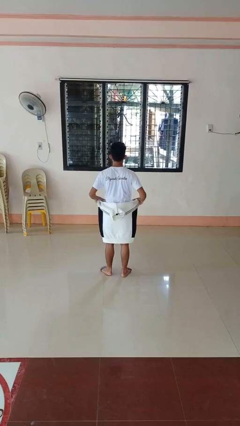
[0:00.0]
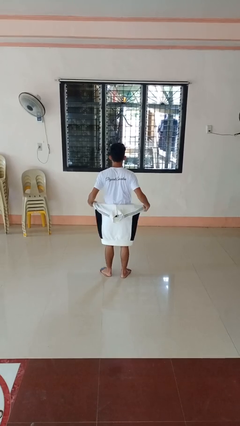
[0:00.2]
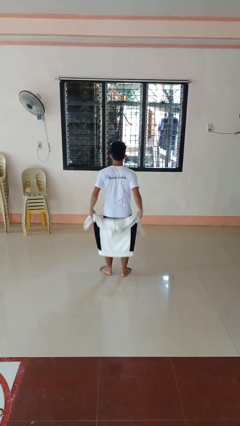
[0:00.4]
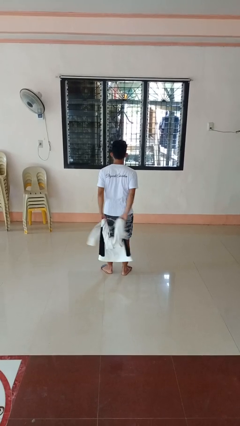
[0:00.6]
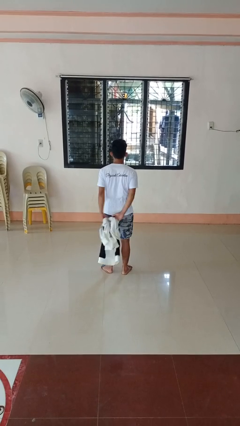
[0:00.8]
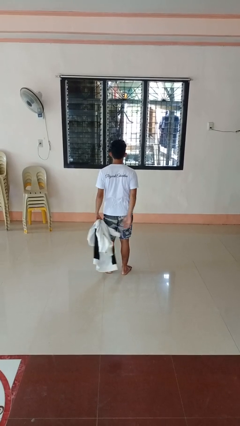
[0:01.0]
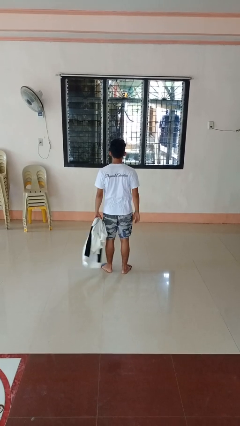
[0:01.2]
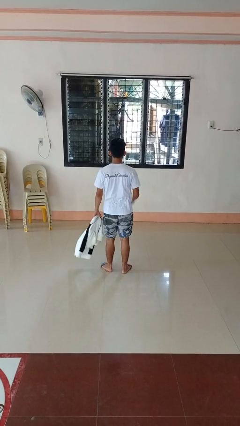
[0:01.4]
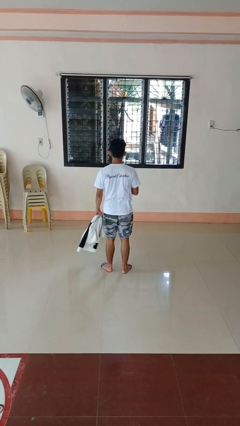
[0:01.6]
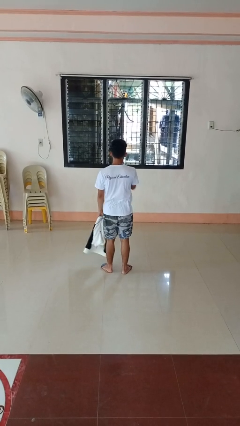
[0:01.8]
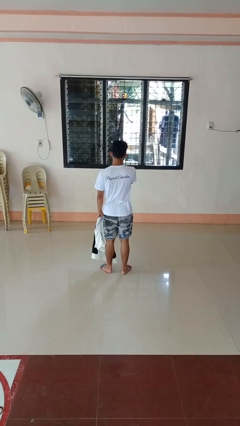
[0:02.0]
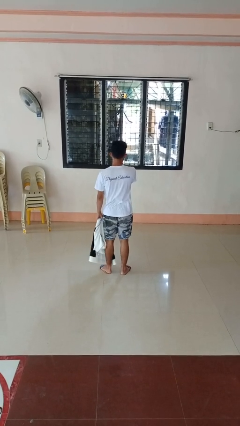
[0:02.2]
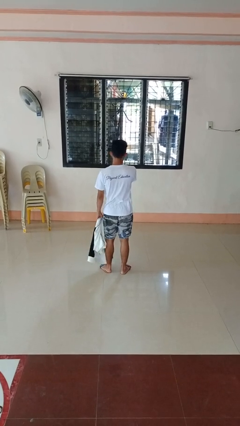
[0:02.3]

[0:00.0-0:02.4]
person unties jacket around waist

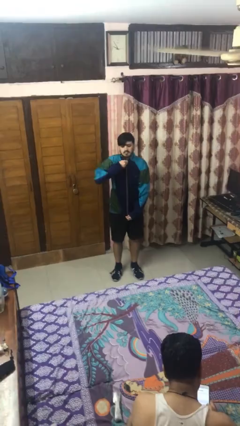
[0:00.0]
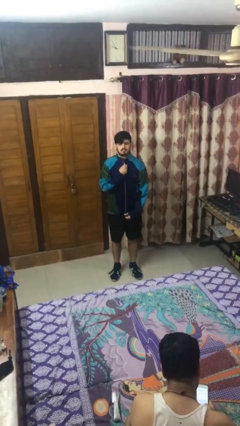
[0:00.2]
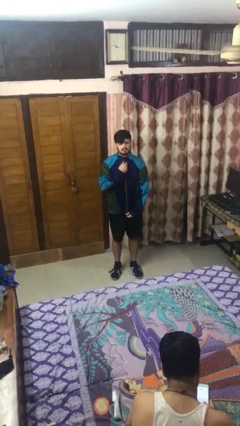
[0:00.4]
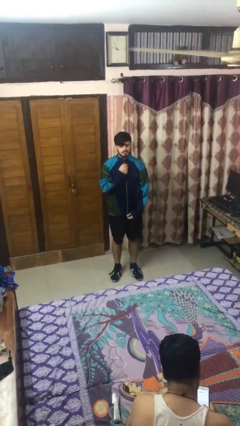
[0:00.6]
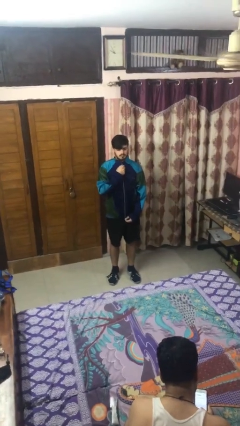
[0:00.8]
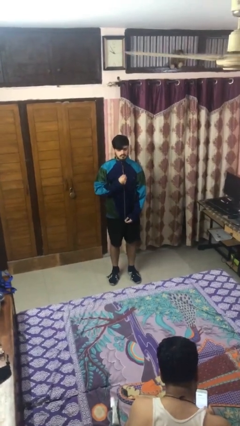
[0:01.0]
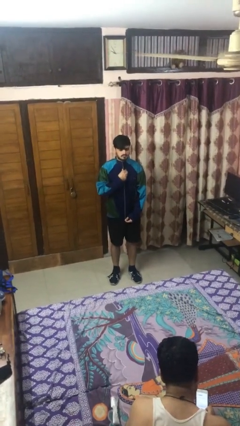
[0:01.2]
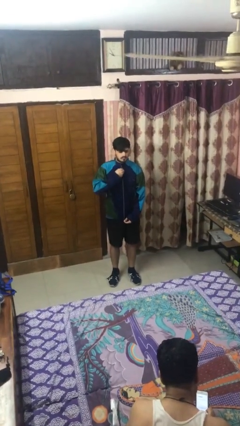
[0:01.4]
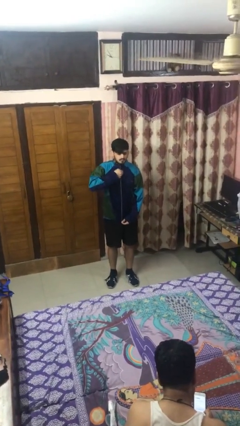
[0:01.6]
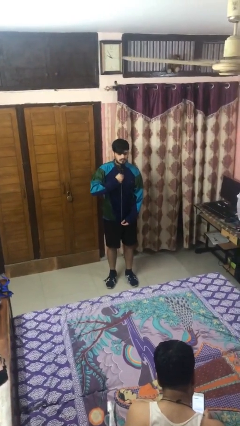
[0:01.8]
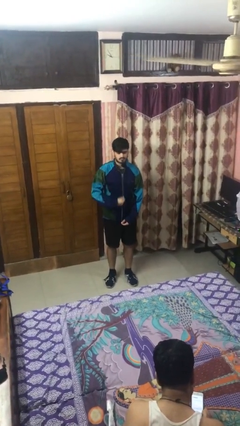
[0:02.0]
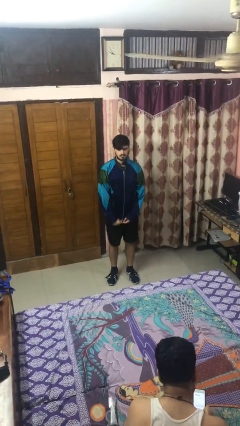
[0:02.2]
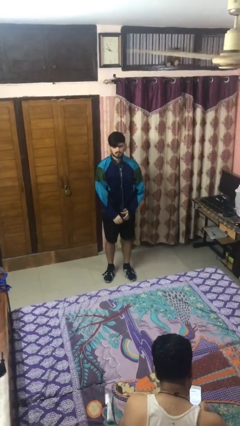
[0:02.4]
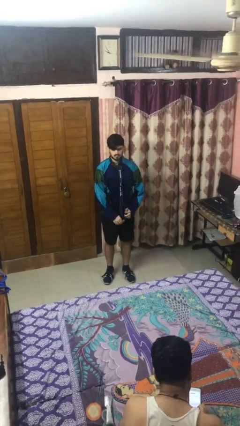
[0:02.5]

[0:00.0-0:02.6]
person unzips jacket

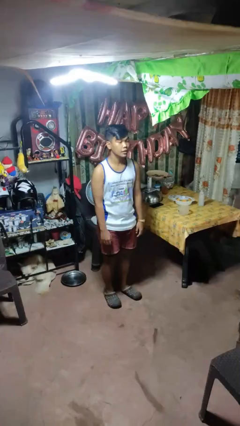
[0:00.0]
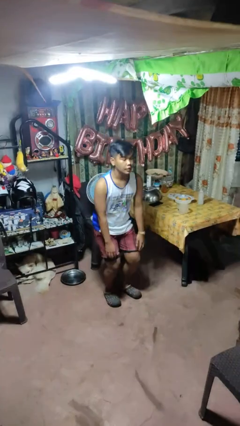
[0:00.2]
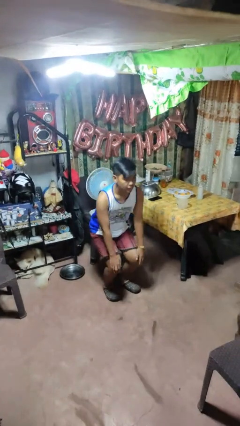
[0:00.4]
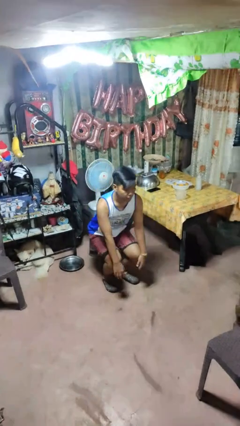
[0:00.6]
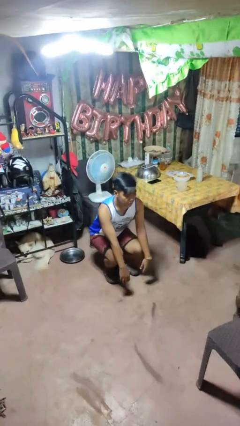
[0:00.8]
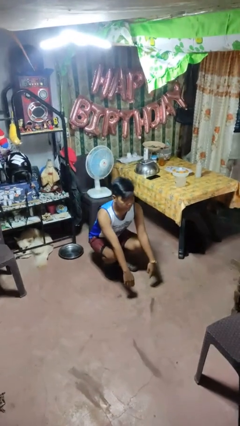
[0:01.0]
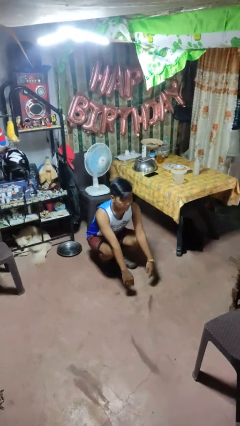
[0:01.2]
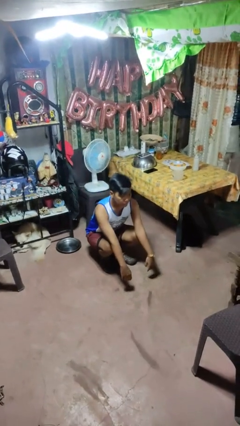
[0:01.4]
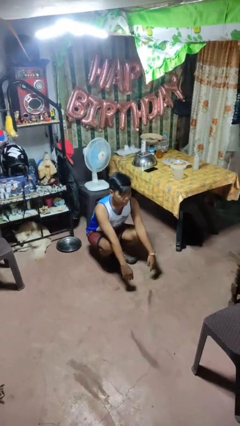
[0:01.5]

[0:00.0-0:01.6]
person squats

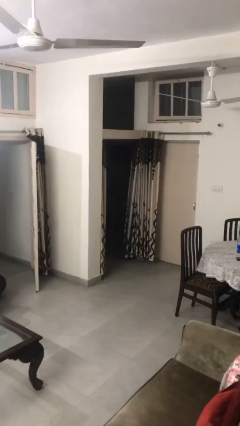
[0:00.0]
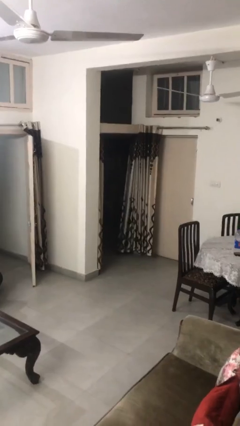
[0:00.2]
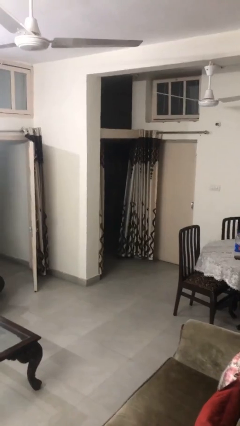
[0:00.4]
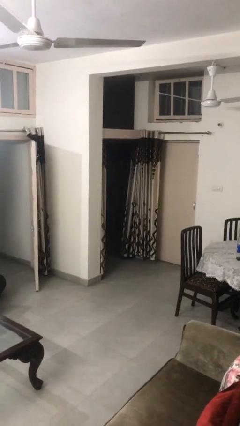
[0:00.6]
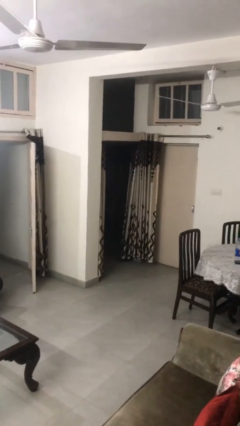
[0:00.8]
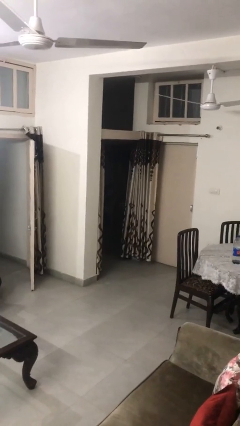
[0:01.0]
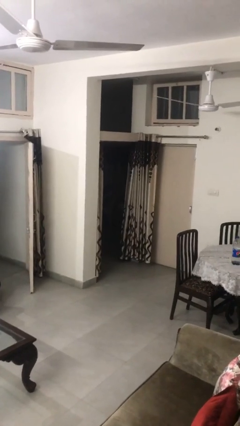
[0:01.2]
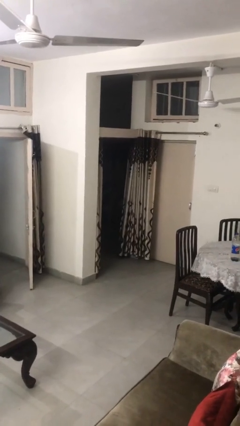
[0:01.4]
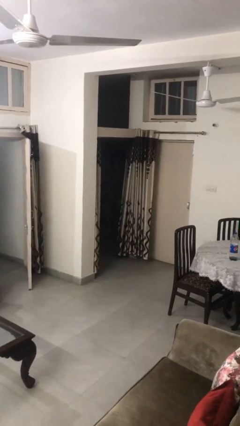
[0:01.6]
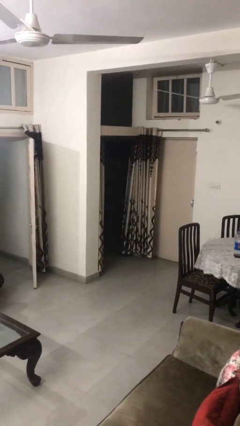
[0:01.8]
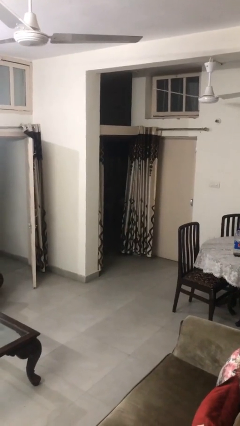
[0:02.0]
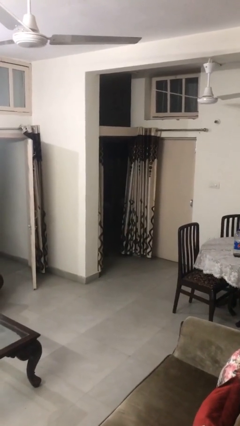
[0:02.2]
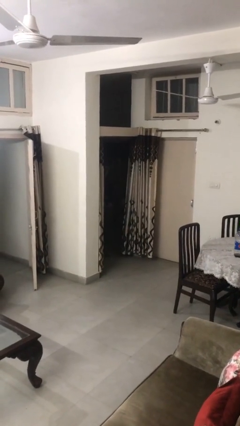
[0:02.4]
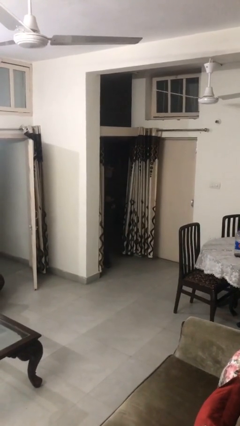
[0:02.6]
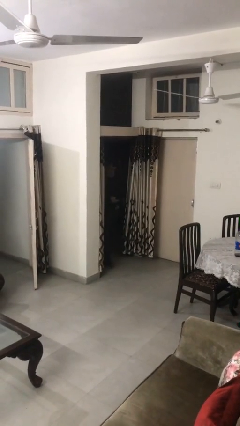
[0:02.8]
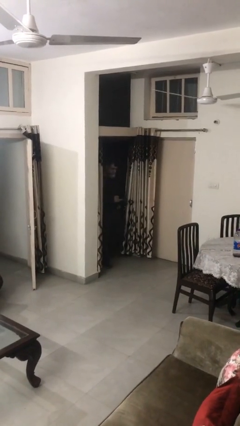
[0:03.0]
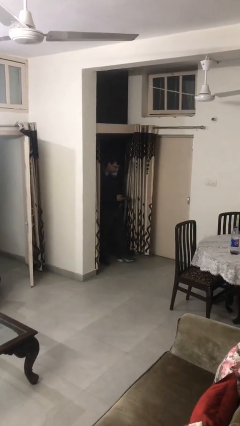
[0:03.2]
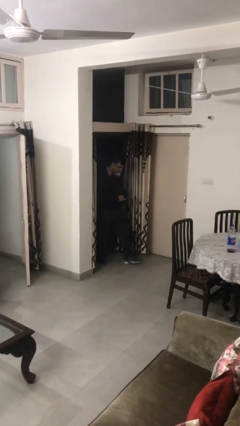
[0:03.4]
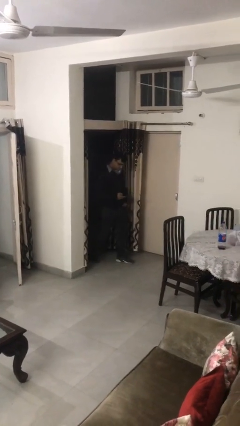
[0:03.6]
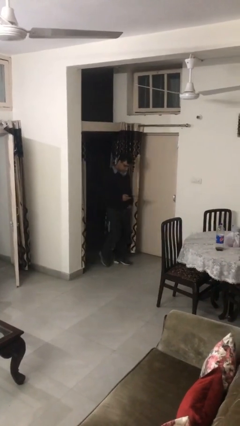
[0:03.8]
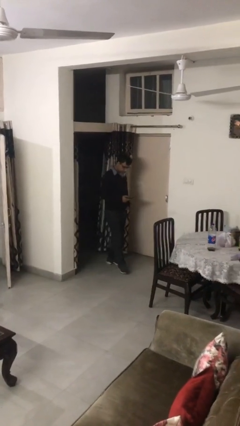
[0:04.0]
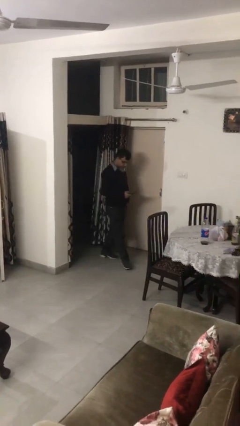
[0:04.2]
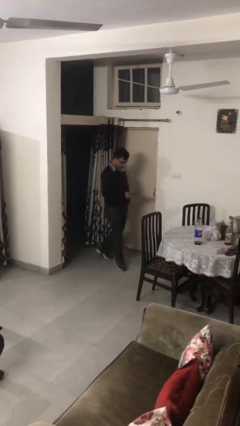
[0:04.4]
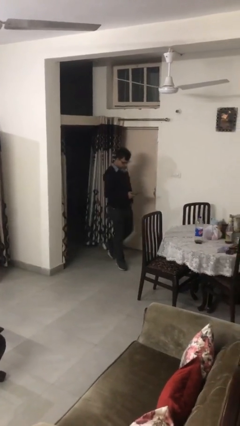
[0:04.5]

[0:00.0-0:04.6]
person enters scene through structure

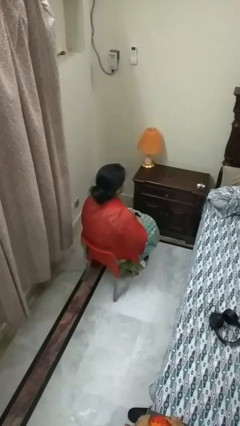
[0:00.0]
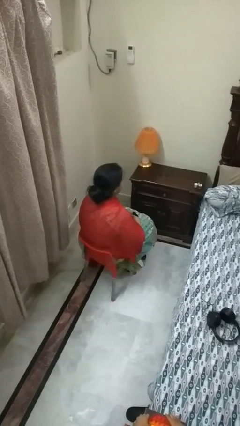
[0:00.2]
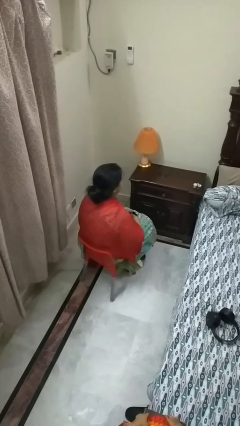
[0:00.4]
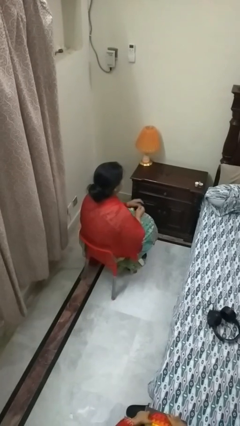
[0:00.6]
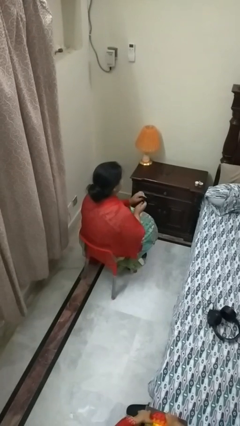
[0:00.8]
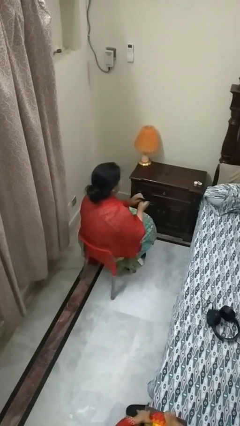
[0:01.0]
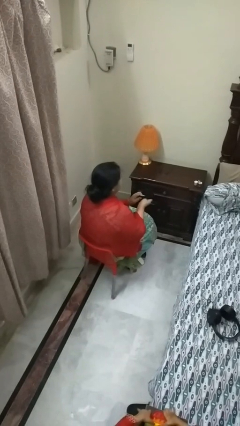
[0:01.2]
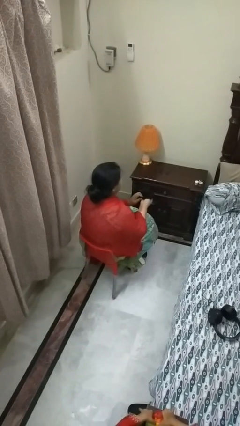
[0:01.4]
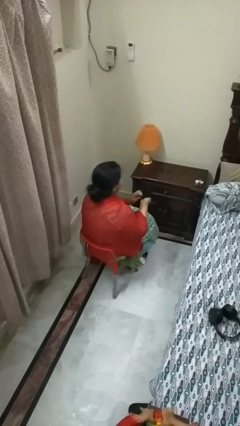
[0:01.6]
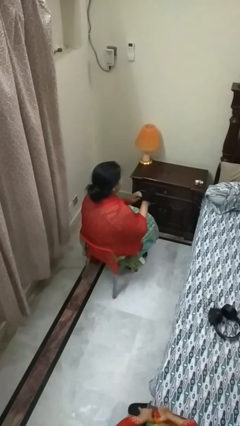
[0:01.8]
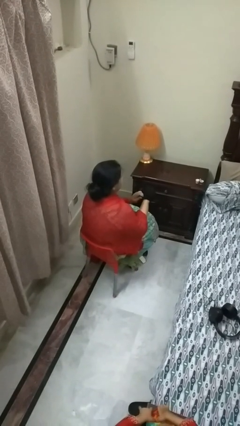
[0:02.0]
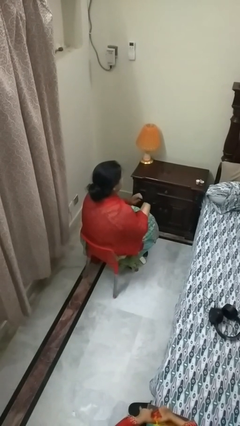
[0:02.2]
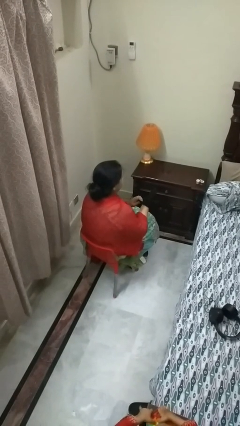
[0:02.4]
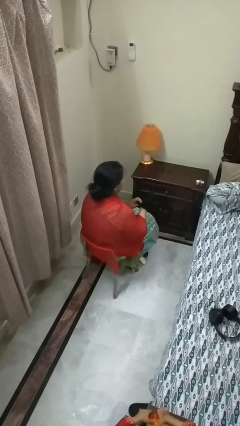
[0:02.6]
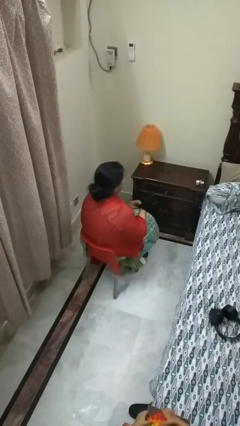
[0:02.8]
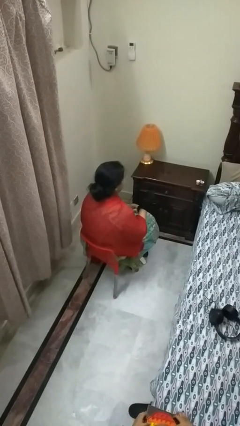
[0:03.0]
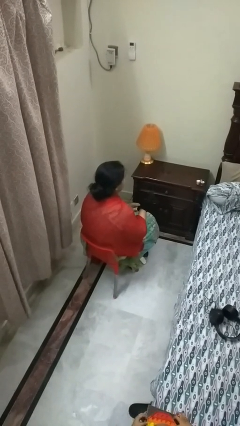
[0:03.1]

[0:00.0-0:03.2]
person puts on gloves

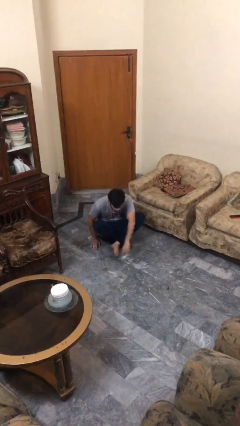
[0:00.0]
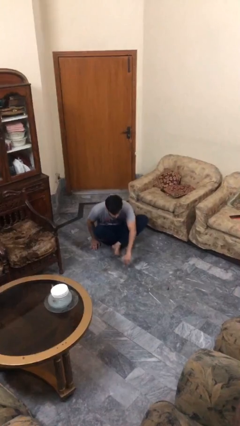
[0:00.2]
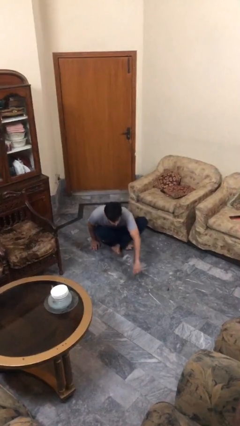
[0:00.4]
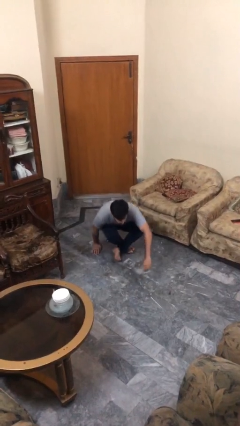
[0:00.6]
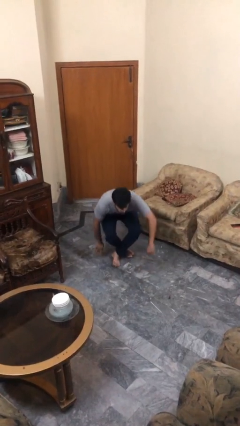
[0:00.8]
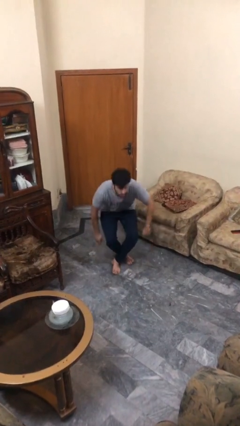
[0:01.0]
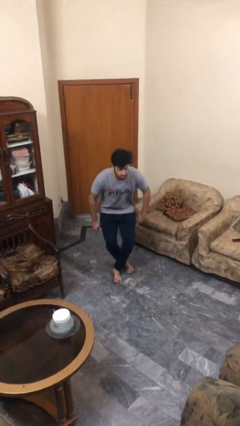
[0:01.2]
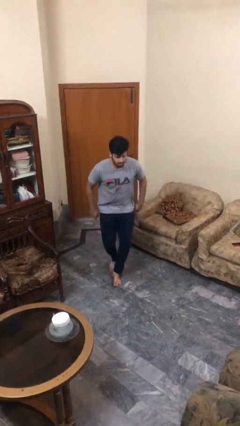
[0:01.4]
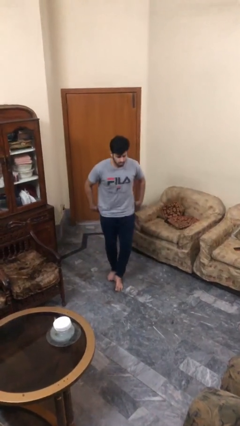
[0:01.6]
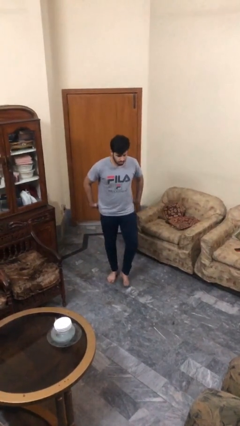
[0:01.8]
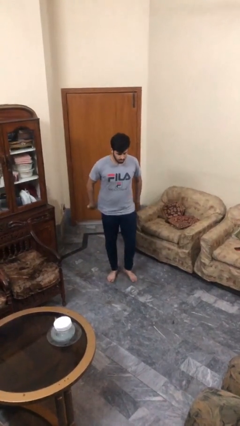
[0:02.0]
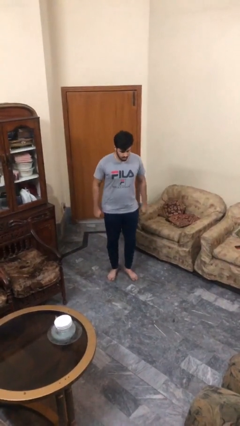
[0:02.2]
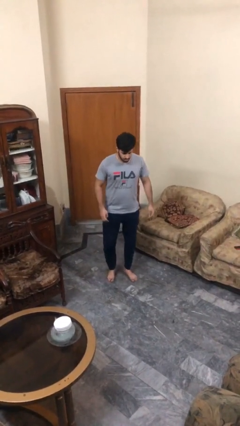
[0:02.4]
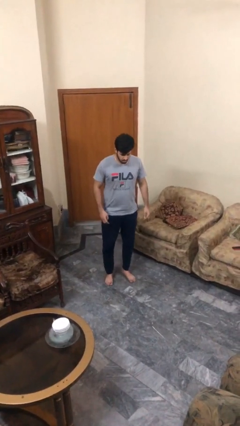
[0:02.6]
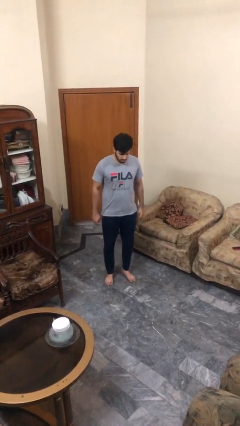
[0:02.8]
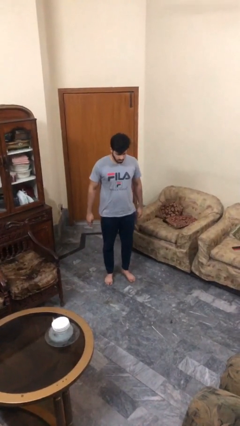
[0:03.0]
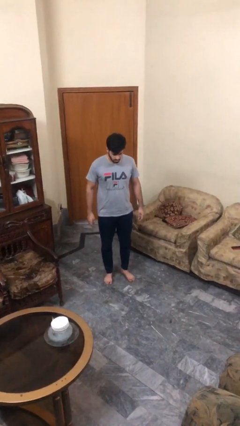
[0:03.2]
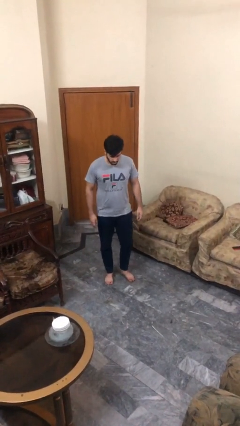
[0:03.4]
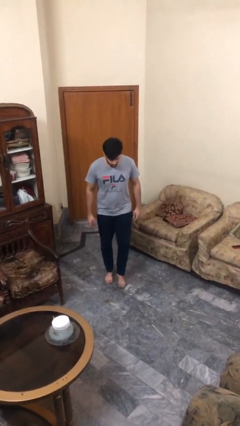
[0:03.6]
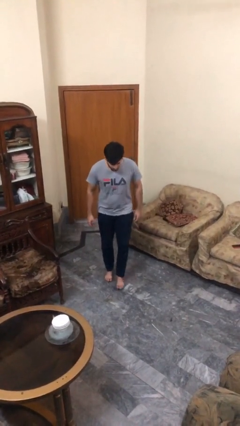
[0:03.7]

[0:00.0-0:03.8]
person stands up from floor
